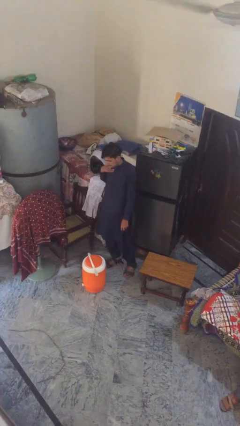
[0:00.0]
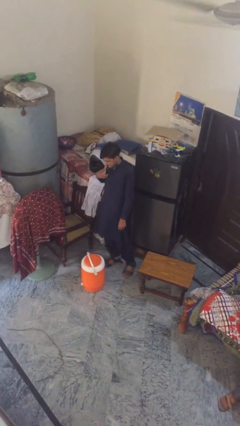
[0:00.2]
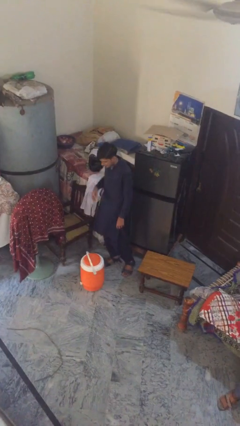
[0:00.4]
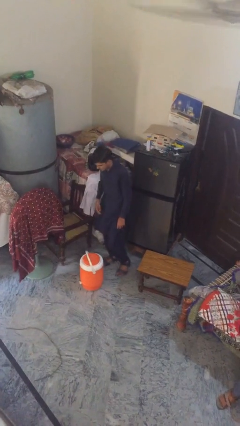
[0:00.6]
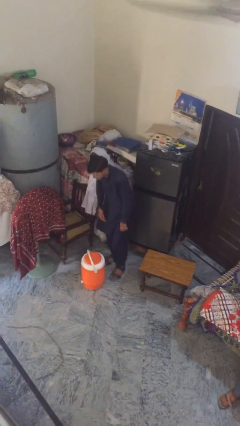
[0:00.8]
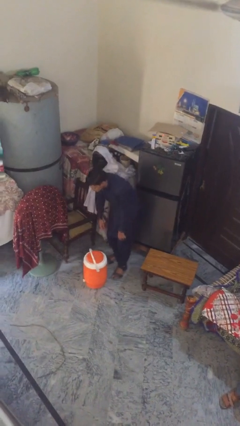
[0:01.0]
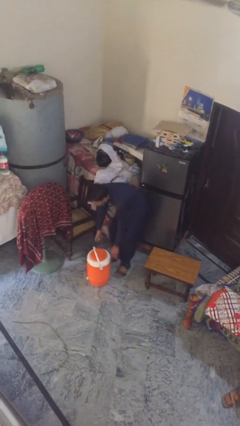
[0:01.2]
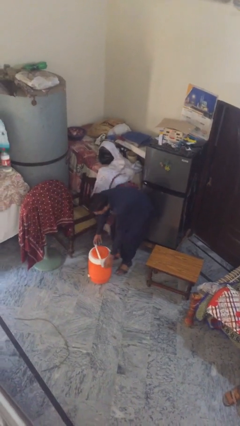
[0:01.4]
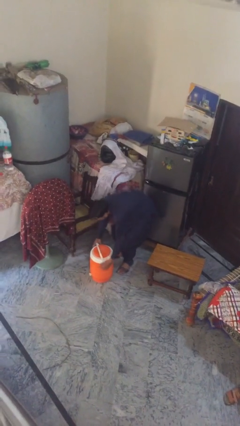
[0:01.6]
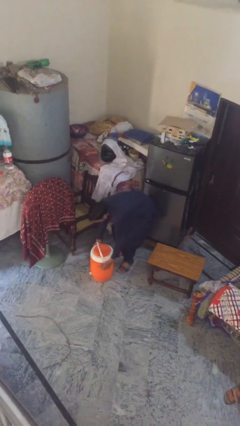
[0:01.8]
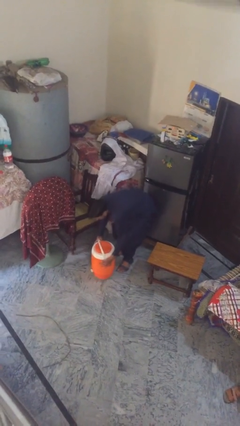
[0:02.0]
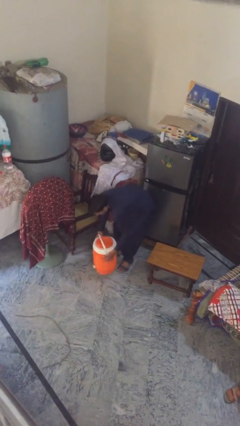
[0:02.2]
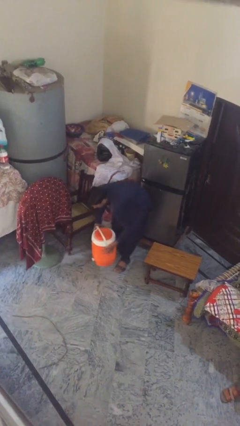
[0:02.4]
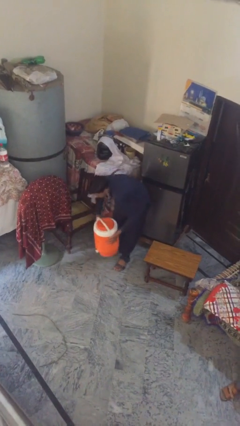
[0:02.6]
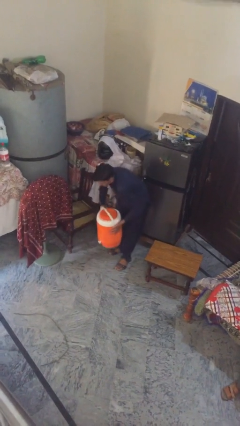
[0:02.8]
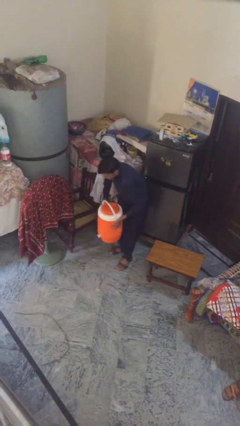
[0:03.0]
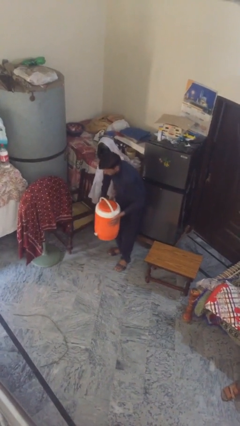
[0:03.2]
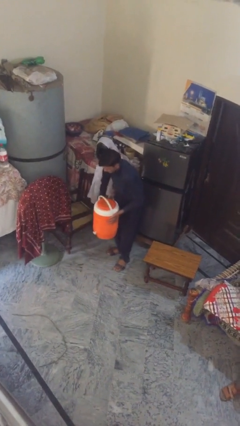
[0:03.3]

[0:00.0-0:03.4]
person picks up object from floor

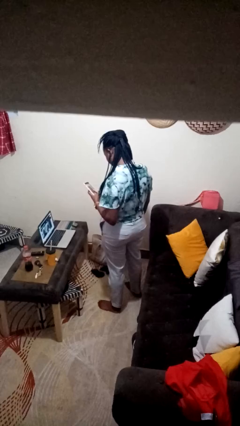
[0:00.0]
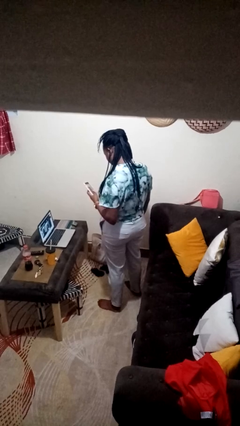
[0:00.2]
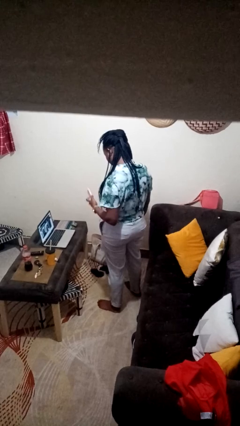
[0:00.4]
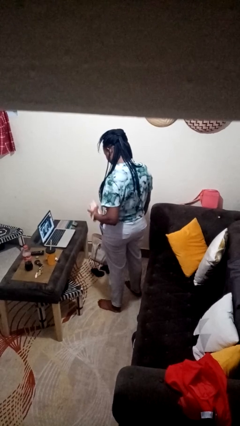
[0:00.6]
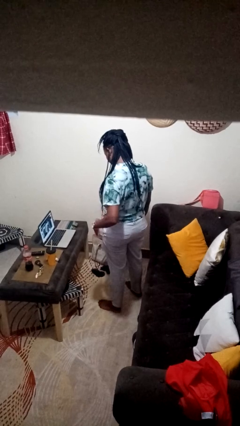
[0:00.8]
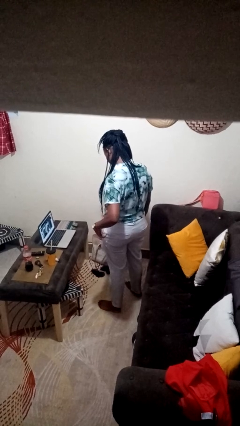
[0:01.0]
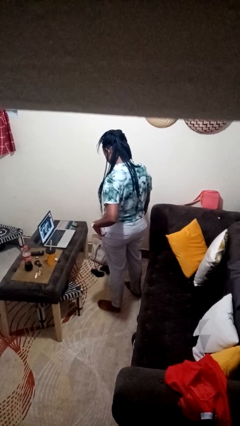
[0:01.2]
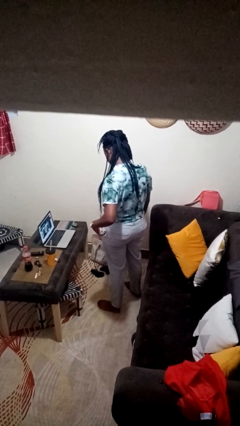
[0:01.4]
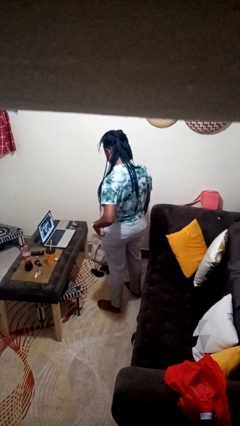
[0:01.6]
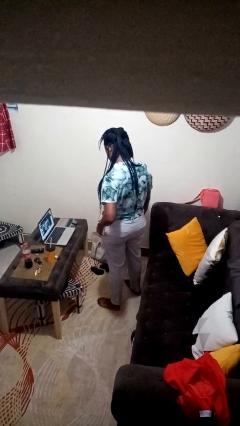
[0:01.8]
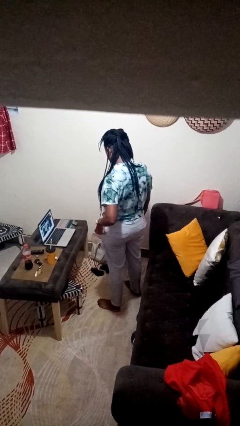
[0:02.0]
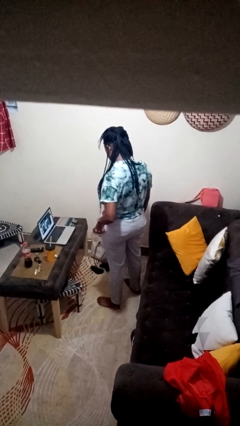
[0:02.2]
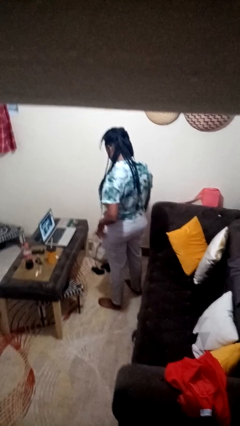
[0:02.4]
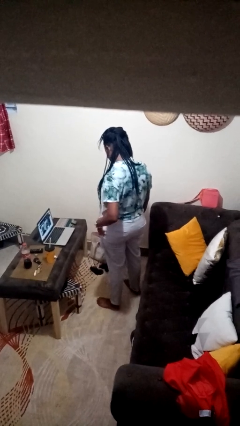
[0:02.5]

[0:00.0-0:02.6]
person puts phone into pocket

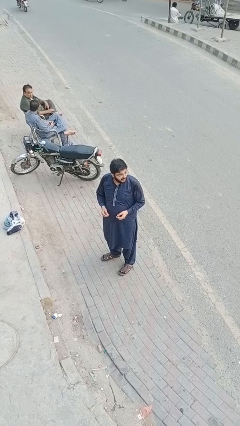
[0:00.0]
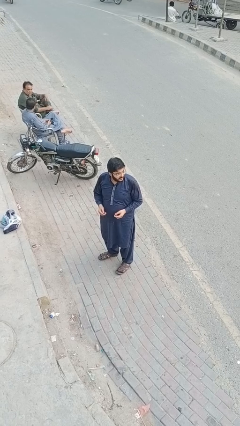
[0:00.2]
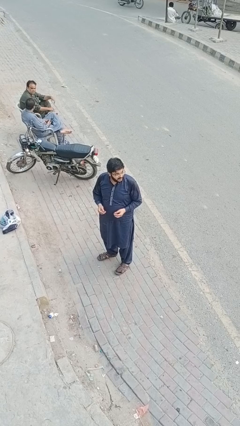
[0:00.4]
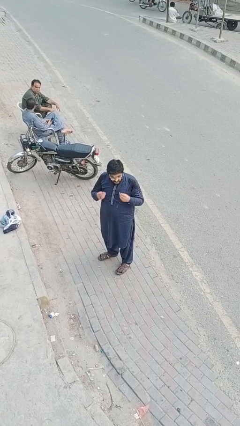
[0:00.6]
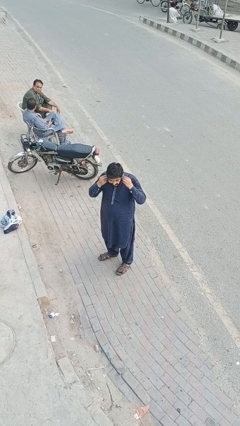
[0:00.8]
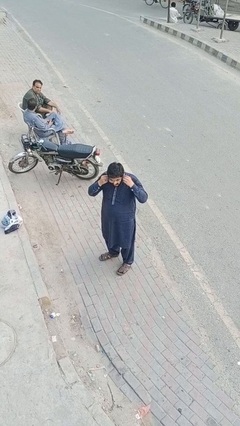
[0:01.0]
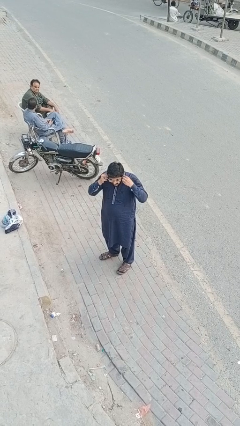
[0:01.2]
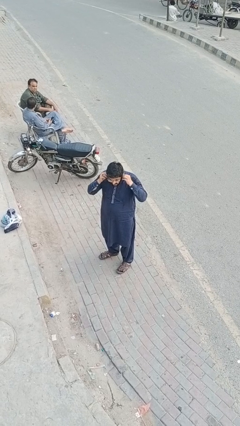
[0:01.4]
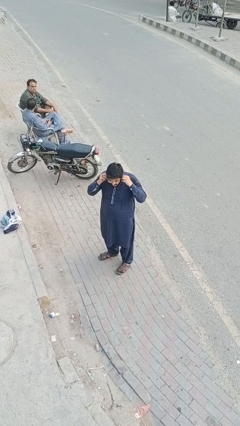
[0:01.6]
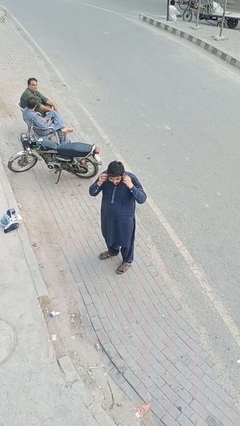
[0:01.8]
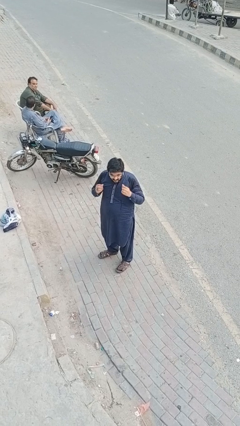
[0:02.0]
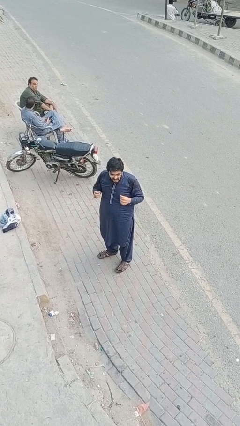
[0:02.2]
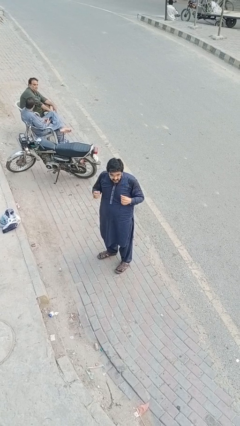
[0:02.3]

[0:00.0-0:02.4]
person puts on headphones

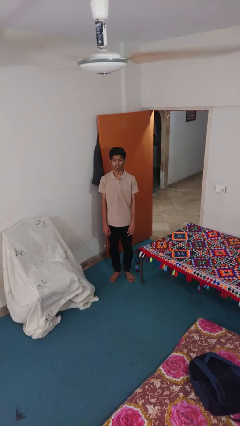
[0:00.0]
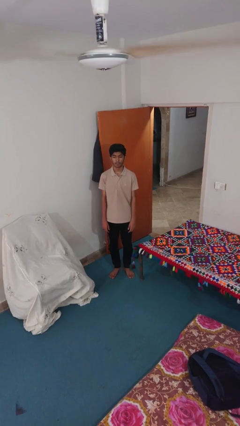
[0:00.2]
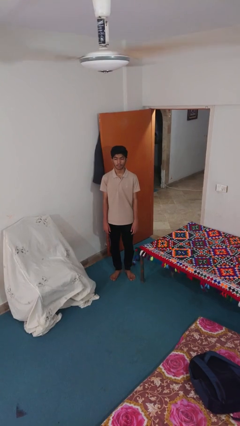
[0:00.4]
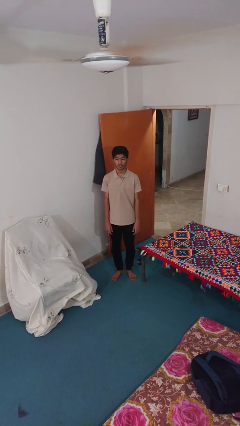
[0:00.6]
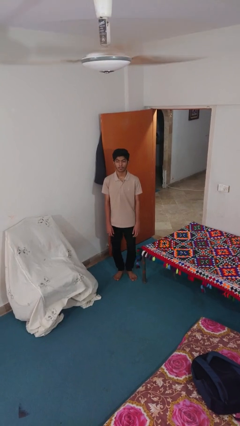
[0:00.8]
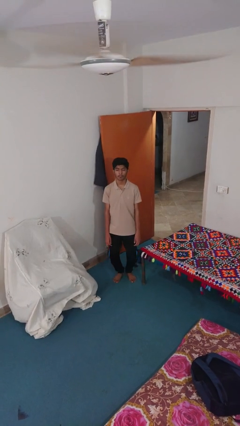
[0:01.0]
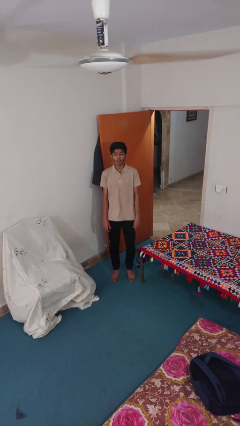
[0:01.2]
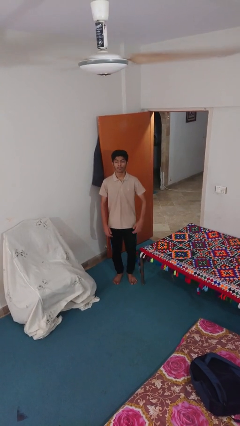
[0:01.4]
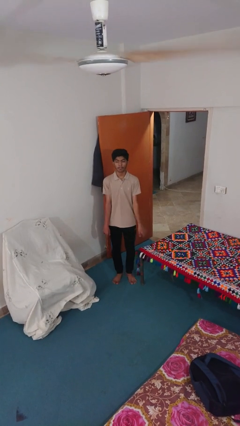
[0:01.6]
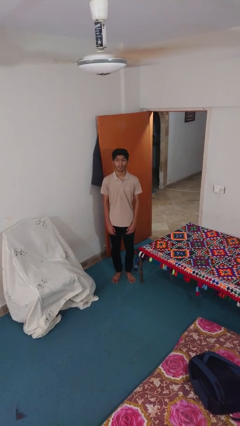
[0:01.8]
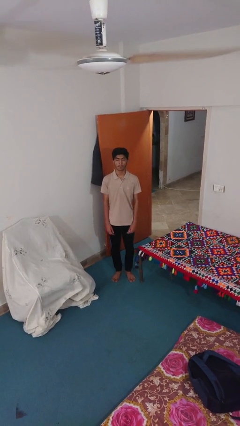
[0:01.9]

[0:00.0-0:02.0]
person jumps

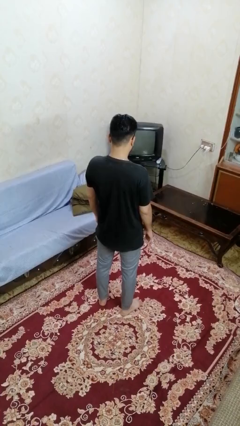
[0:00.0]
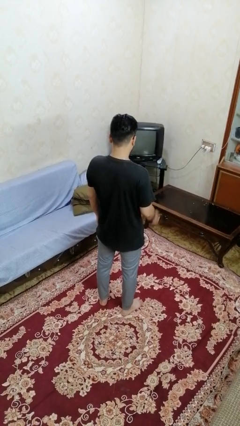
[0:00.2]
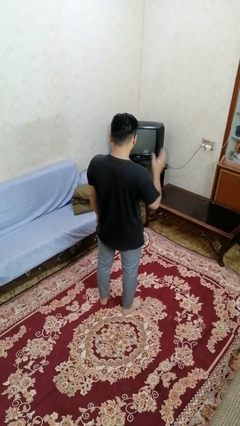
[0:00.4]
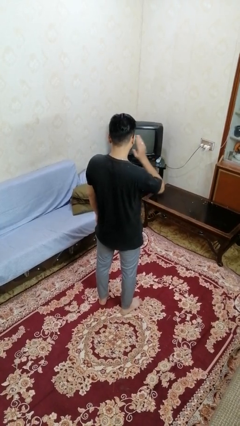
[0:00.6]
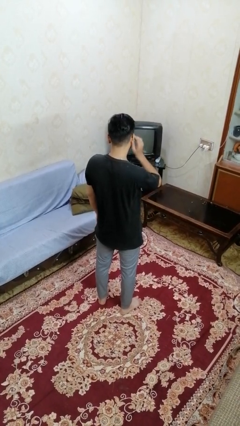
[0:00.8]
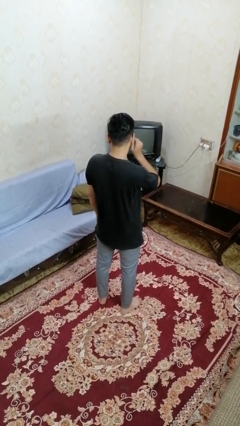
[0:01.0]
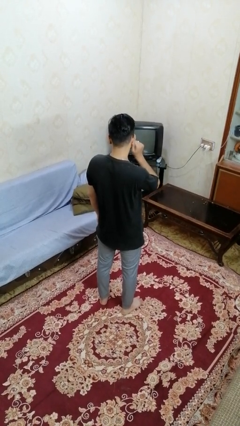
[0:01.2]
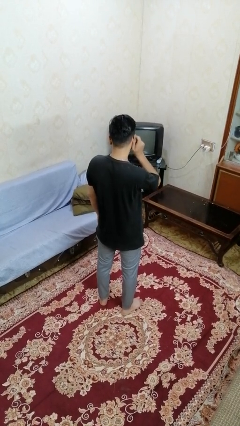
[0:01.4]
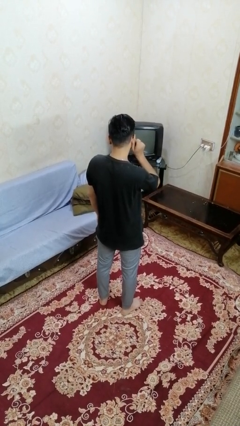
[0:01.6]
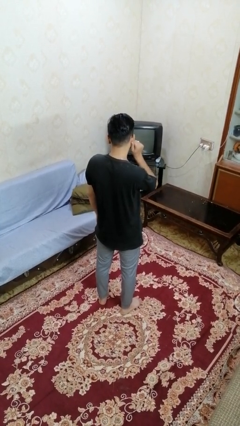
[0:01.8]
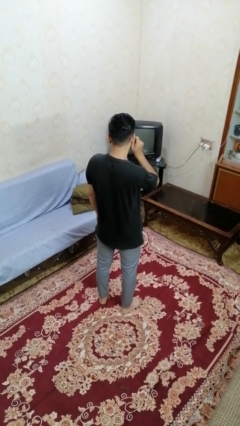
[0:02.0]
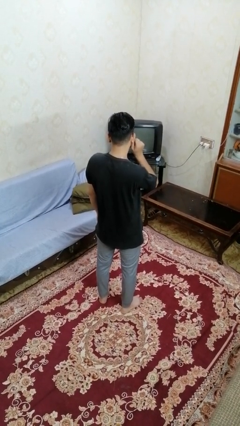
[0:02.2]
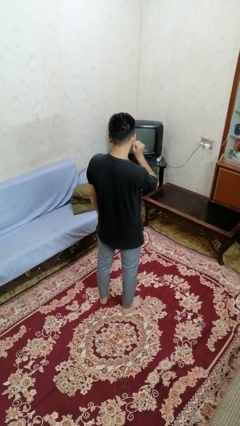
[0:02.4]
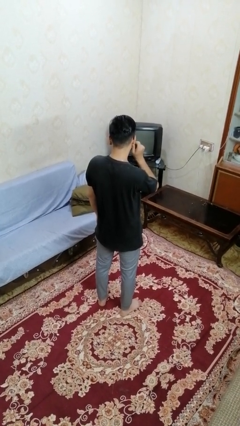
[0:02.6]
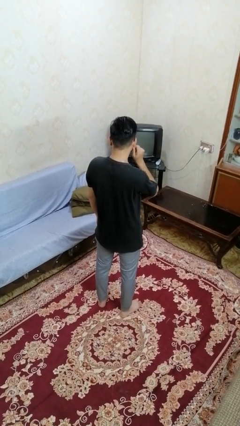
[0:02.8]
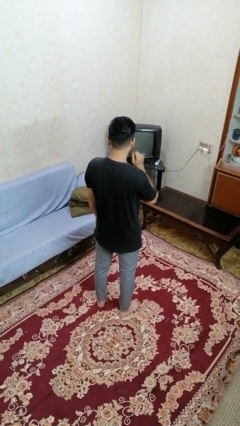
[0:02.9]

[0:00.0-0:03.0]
person touches earlobe

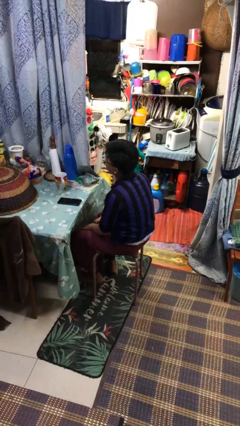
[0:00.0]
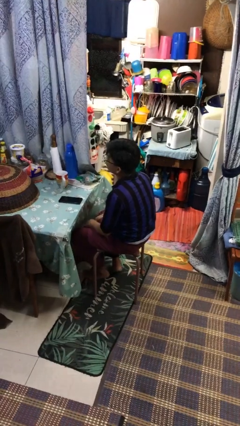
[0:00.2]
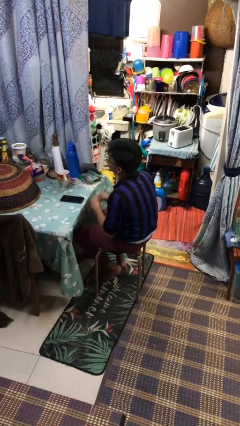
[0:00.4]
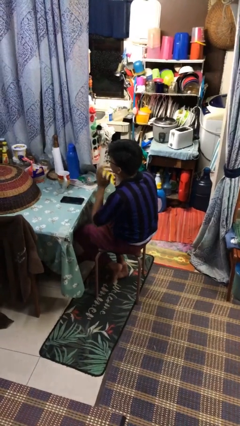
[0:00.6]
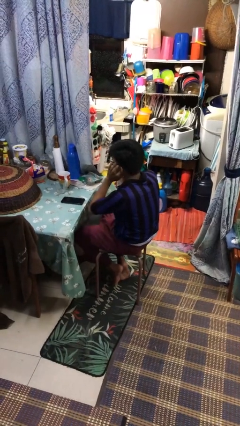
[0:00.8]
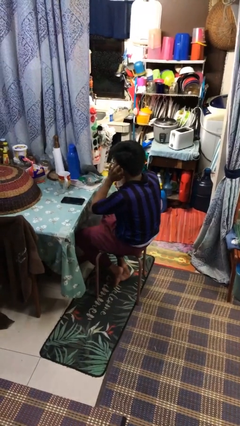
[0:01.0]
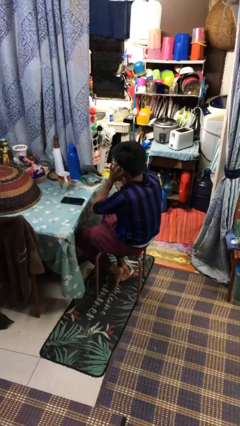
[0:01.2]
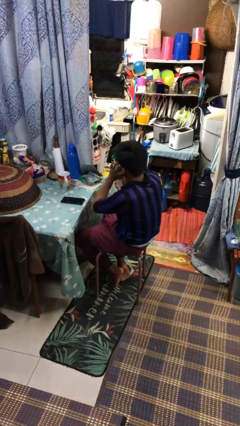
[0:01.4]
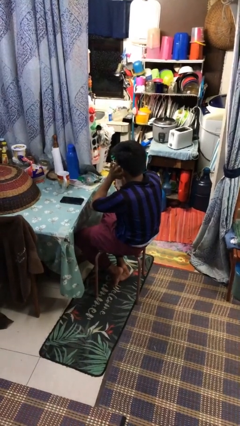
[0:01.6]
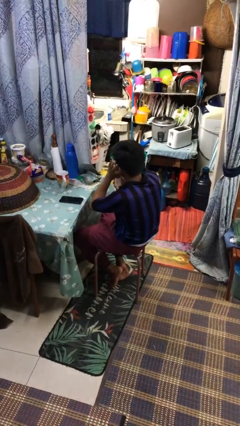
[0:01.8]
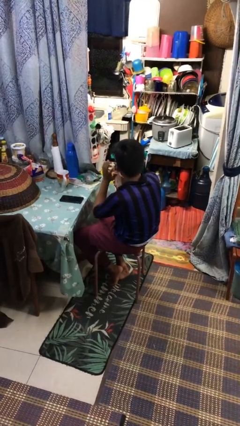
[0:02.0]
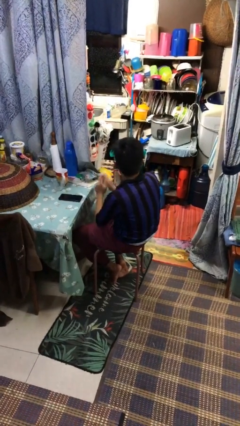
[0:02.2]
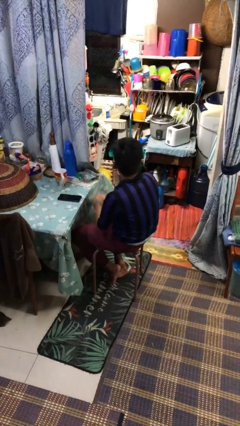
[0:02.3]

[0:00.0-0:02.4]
person puts fingers in ear

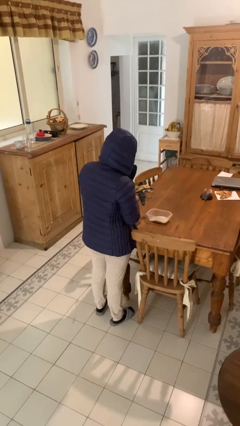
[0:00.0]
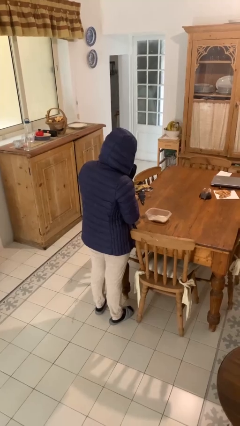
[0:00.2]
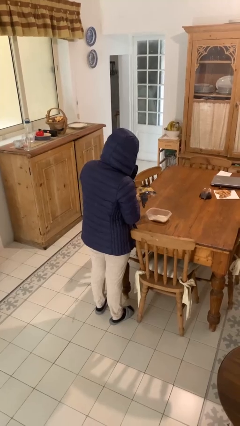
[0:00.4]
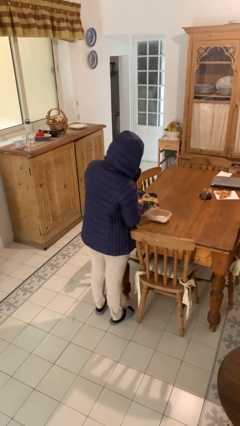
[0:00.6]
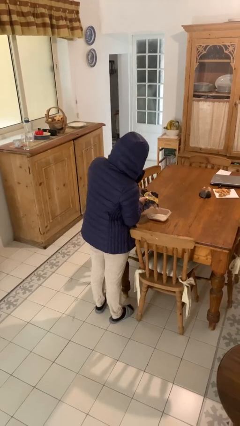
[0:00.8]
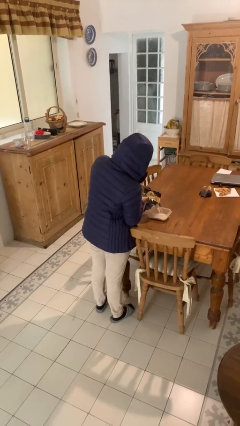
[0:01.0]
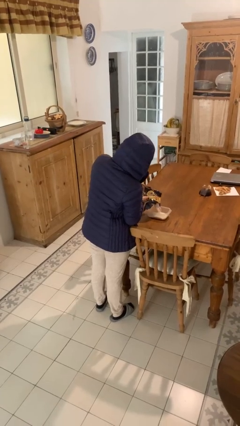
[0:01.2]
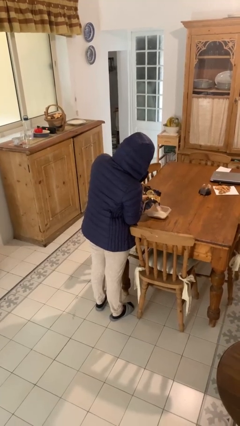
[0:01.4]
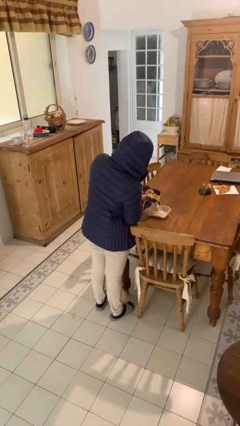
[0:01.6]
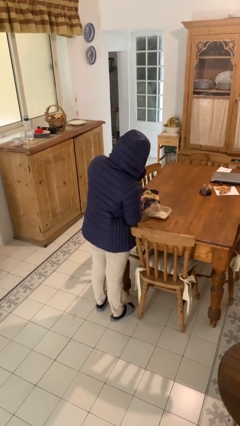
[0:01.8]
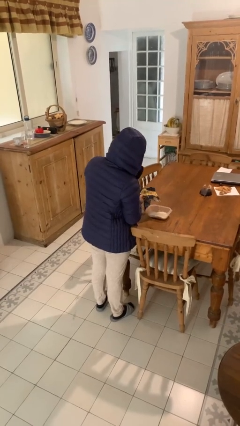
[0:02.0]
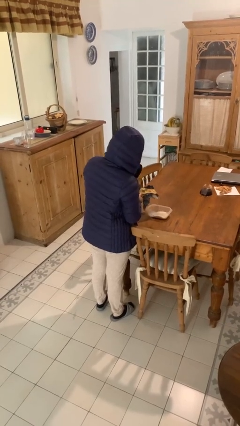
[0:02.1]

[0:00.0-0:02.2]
person pours into bowl
